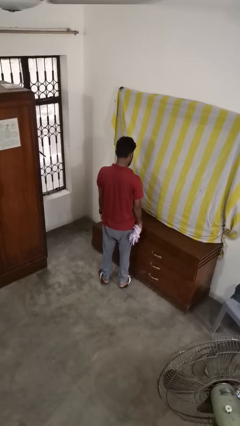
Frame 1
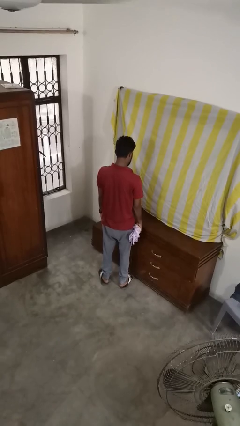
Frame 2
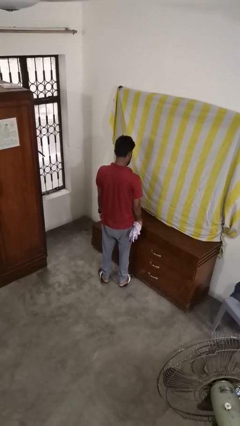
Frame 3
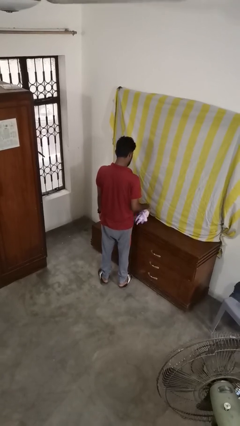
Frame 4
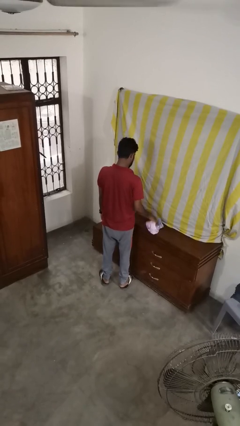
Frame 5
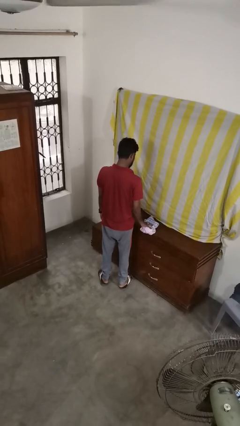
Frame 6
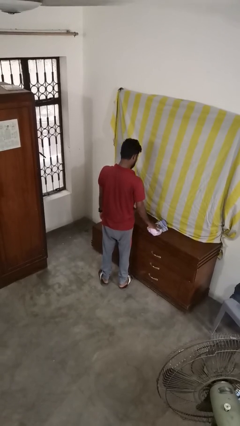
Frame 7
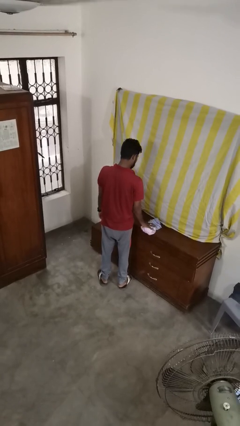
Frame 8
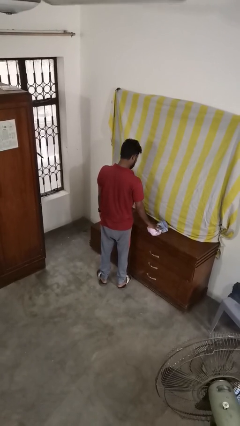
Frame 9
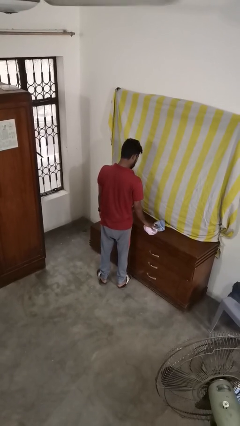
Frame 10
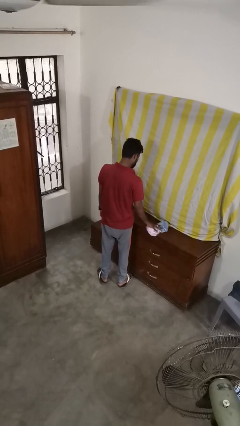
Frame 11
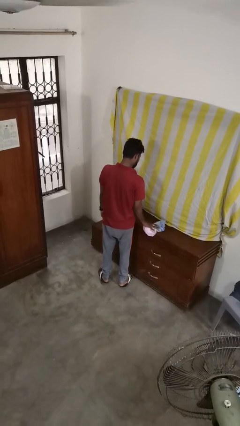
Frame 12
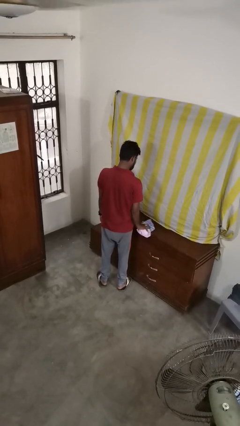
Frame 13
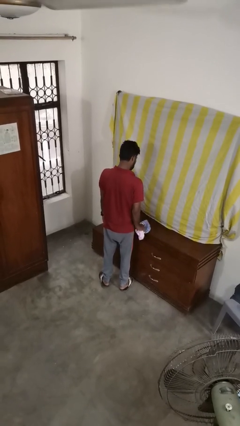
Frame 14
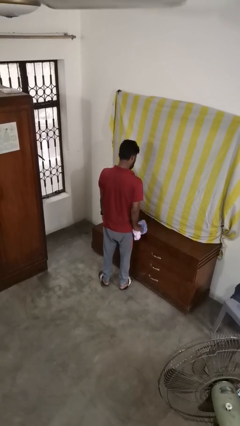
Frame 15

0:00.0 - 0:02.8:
person cleans table with rag

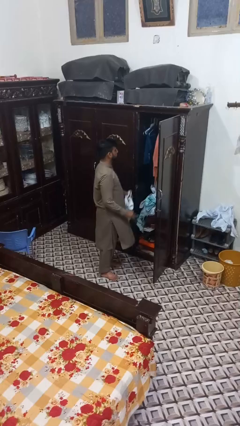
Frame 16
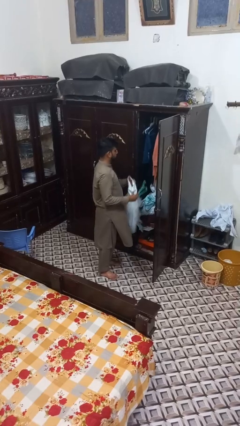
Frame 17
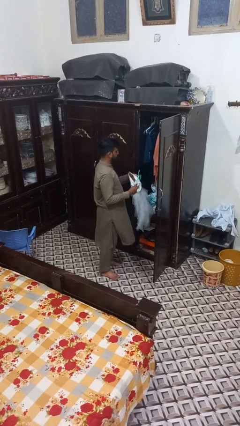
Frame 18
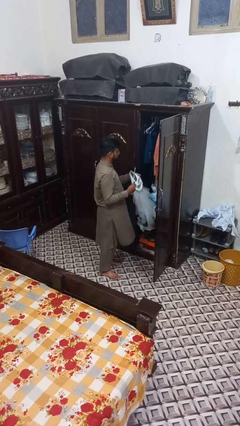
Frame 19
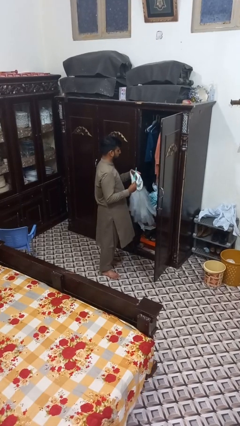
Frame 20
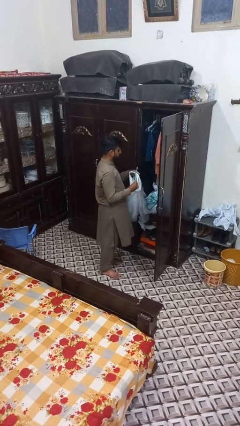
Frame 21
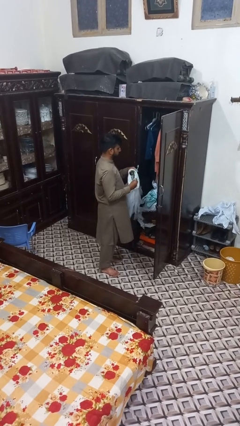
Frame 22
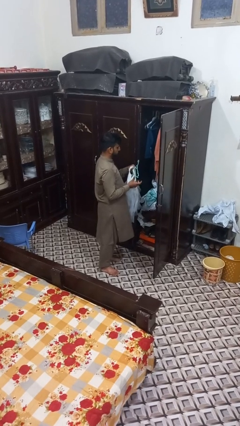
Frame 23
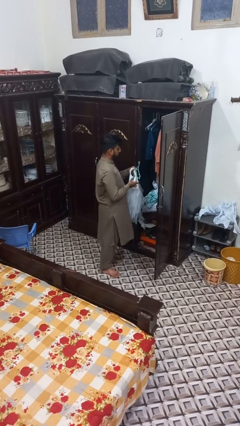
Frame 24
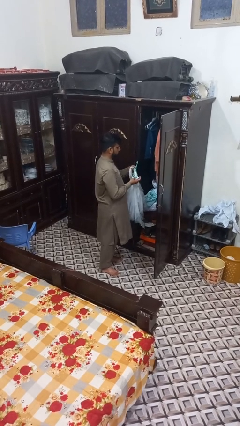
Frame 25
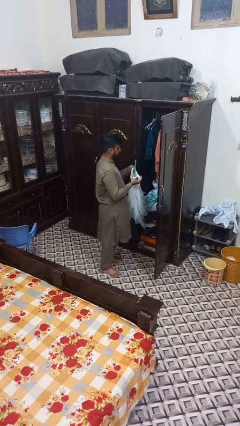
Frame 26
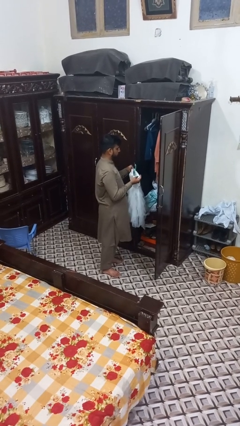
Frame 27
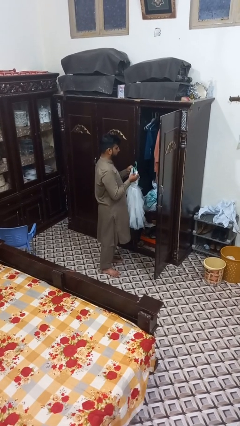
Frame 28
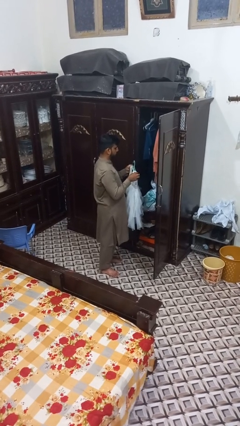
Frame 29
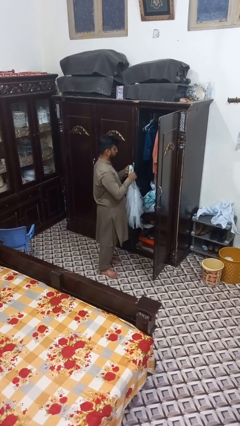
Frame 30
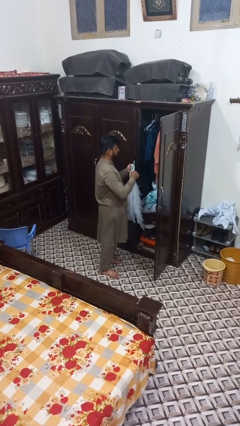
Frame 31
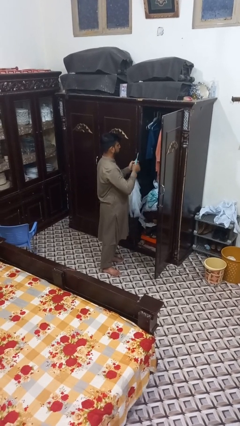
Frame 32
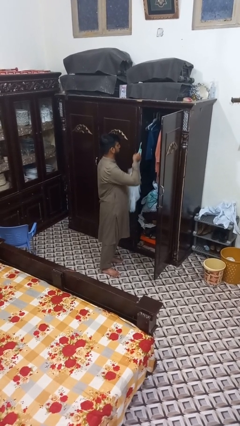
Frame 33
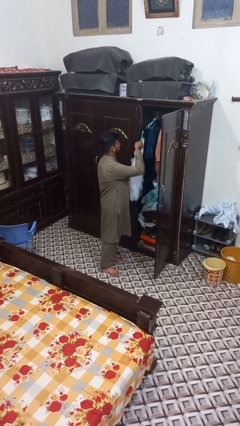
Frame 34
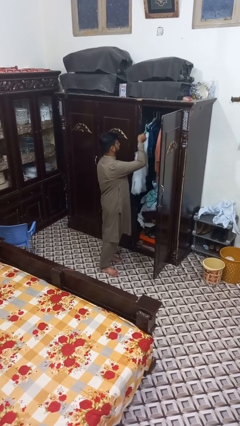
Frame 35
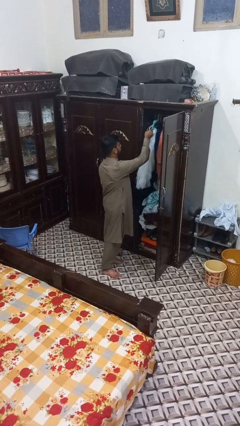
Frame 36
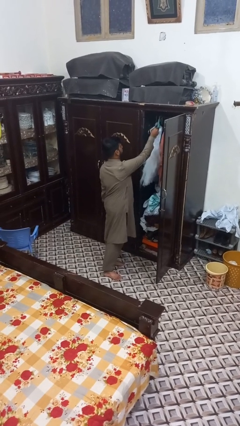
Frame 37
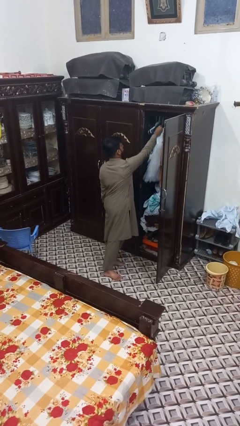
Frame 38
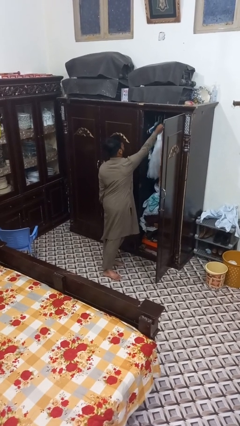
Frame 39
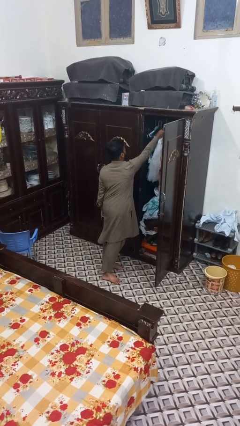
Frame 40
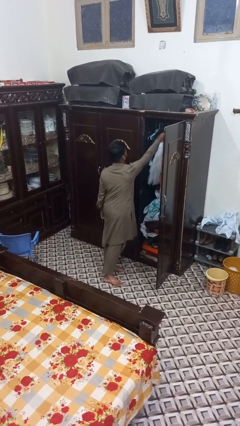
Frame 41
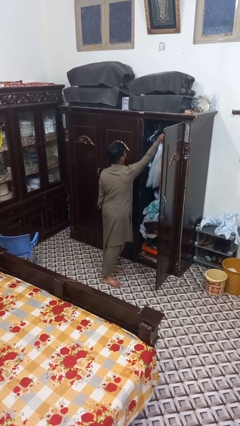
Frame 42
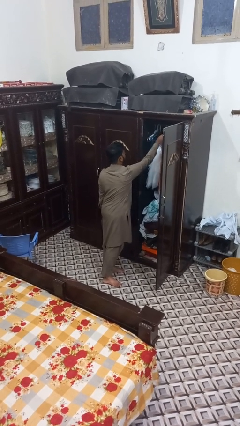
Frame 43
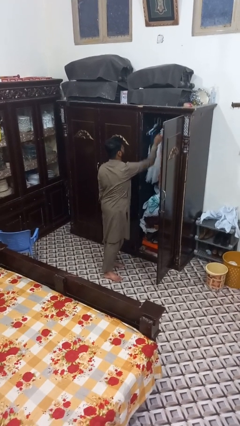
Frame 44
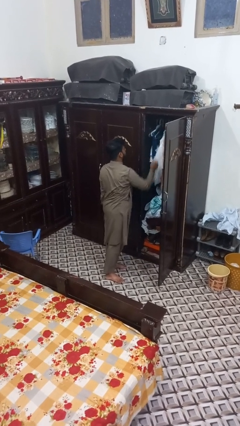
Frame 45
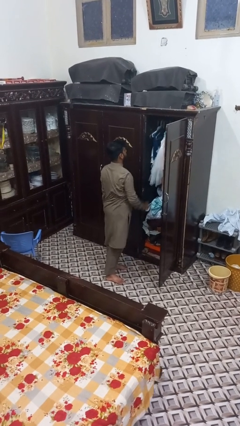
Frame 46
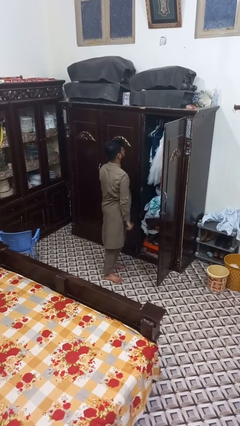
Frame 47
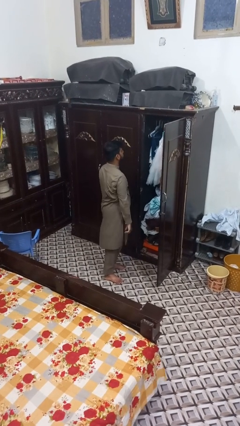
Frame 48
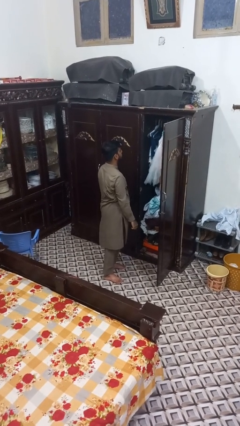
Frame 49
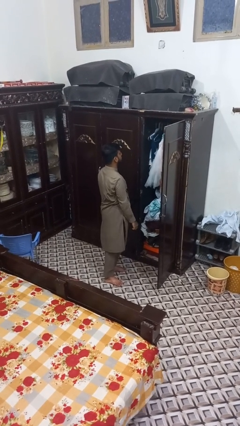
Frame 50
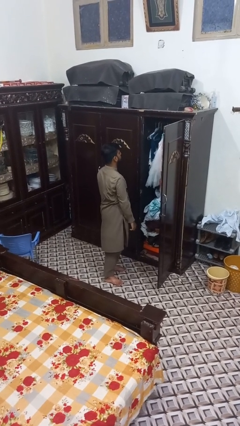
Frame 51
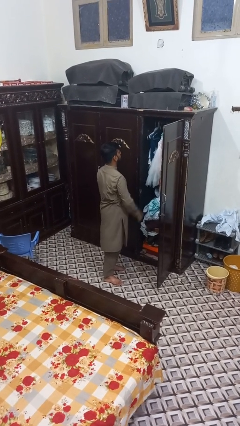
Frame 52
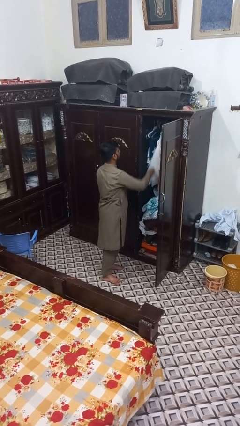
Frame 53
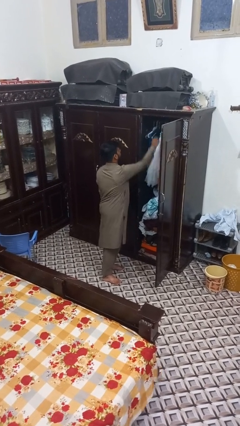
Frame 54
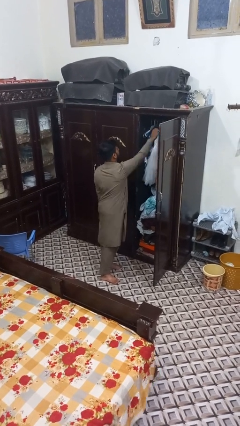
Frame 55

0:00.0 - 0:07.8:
person puts clothes into closet

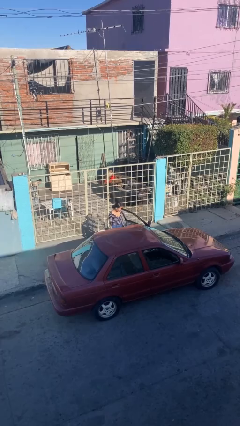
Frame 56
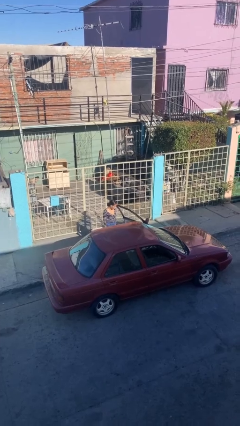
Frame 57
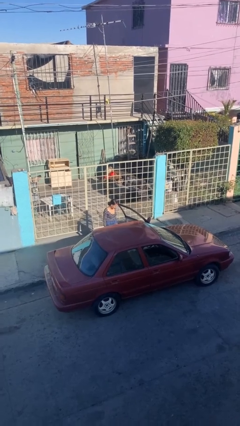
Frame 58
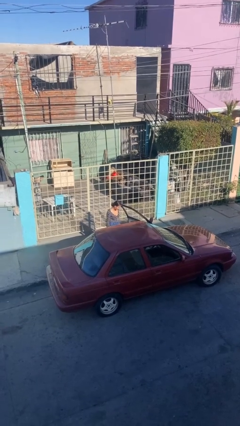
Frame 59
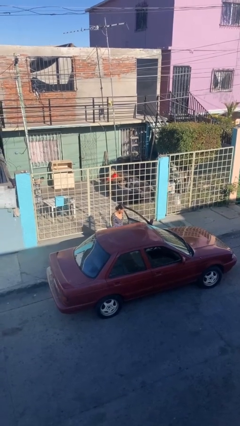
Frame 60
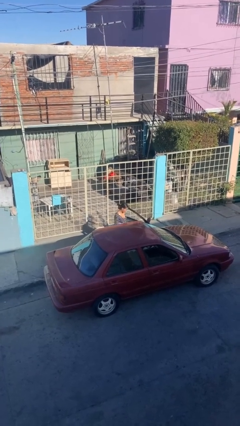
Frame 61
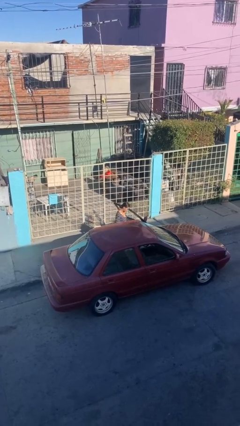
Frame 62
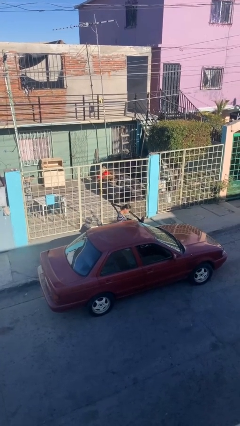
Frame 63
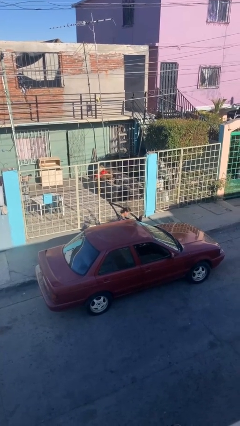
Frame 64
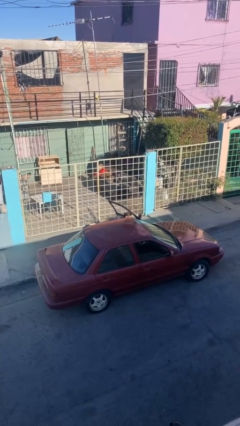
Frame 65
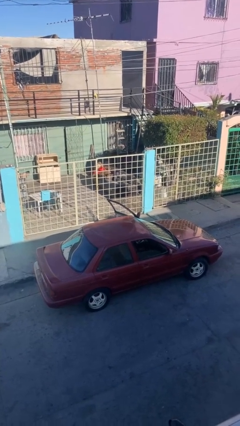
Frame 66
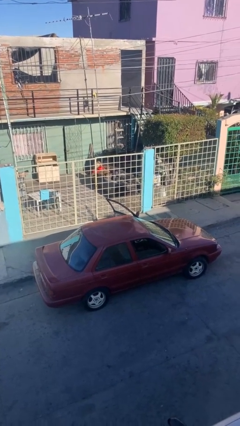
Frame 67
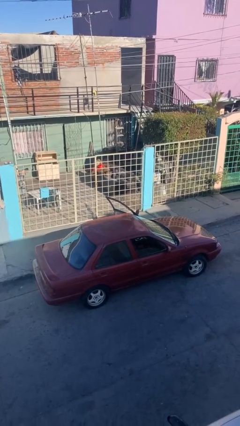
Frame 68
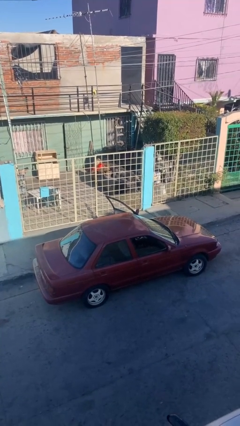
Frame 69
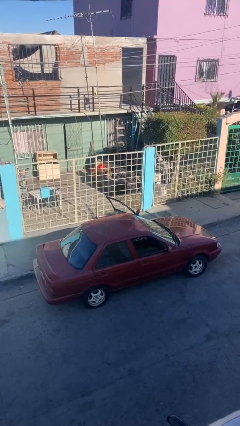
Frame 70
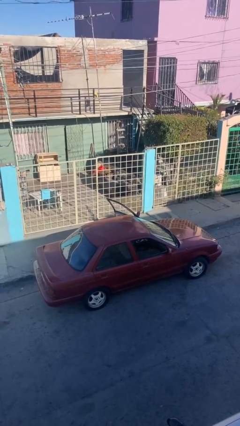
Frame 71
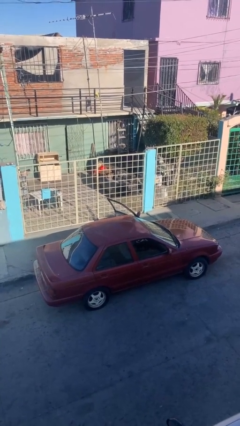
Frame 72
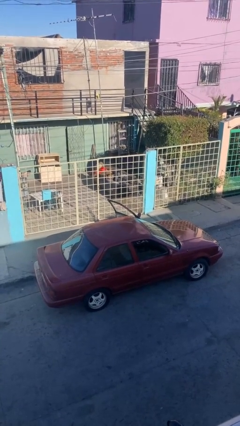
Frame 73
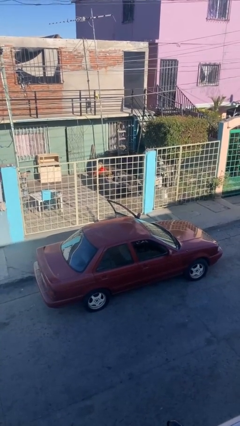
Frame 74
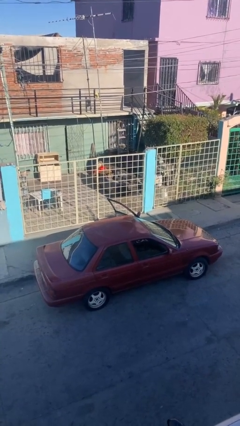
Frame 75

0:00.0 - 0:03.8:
person enters car

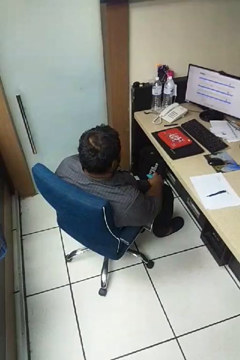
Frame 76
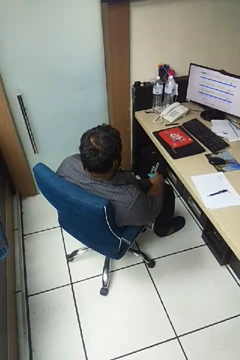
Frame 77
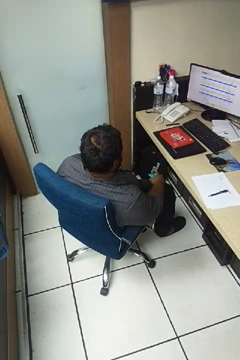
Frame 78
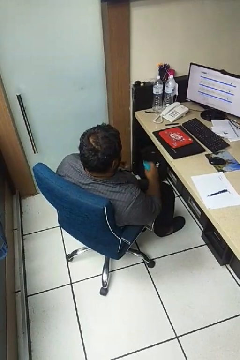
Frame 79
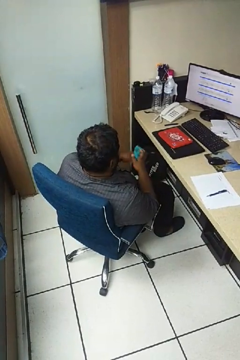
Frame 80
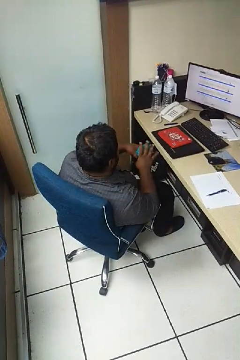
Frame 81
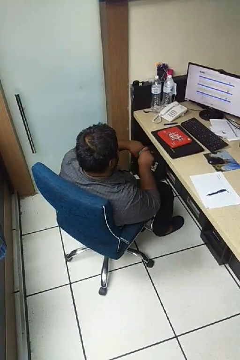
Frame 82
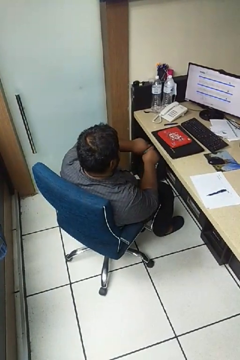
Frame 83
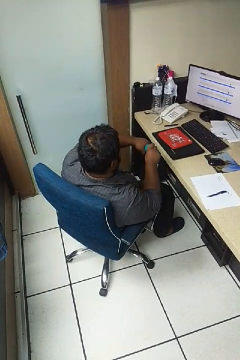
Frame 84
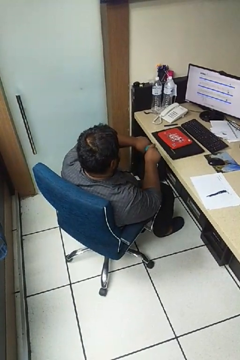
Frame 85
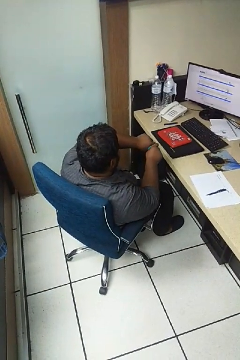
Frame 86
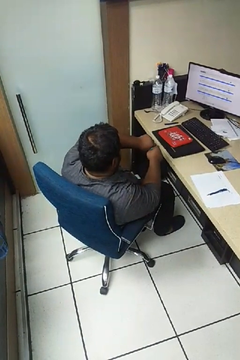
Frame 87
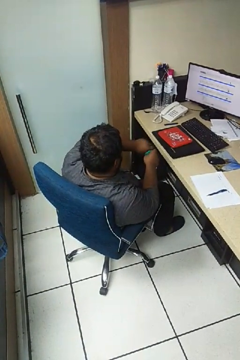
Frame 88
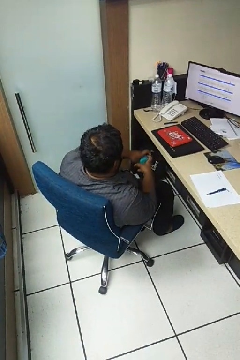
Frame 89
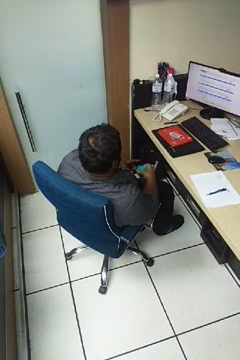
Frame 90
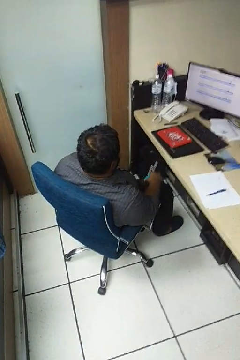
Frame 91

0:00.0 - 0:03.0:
person squeezes object

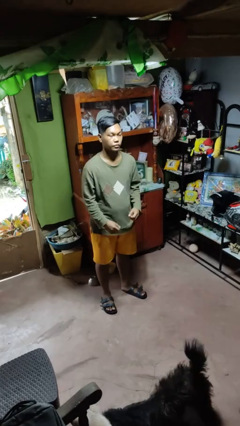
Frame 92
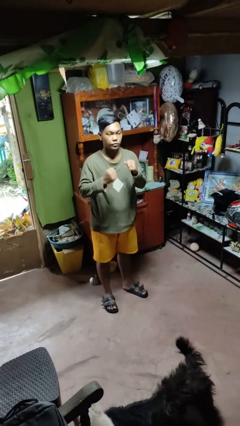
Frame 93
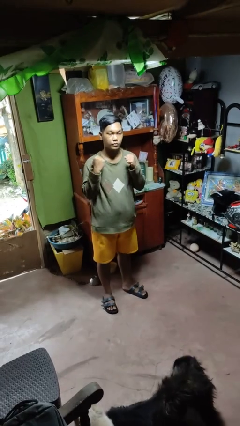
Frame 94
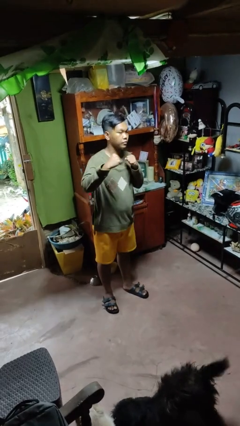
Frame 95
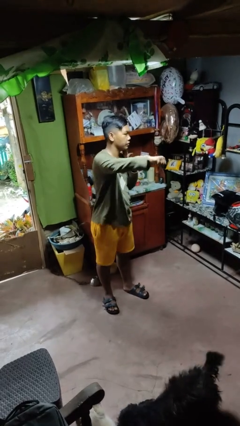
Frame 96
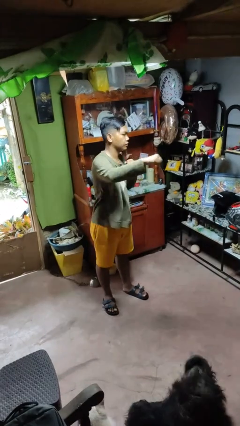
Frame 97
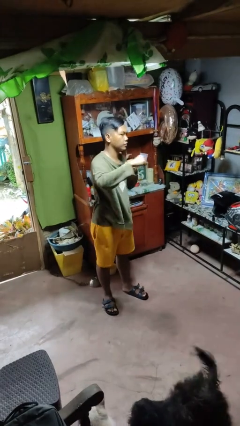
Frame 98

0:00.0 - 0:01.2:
person punches
